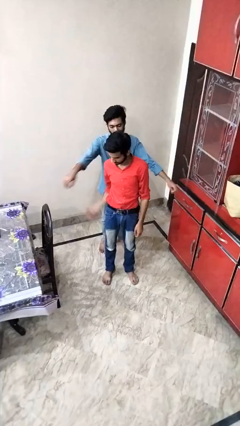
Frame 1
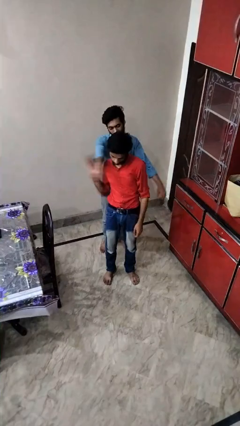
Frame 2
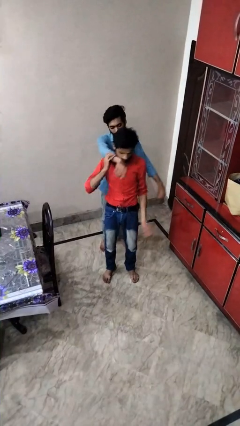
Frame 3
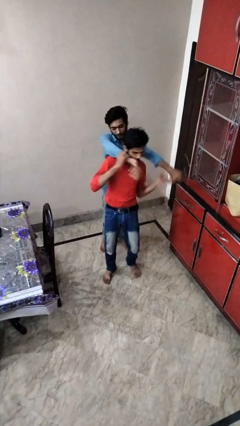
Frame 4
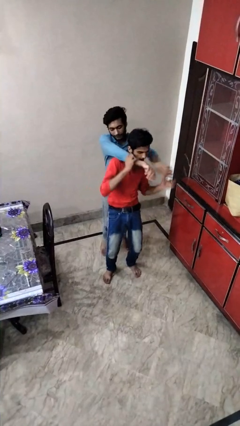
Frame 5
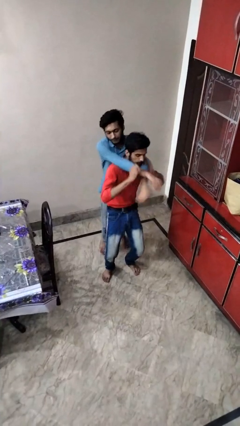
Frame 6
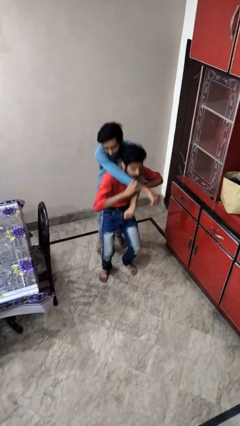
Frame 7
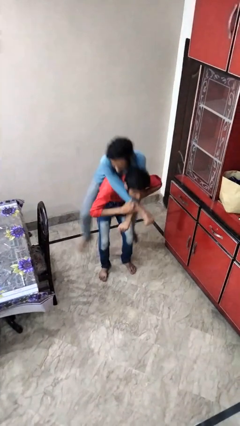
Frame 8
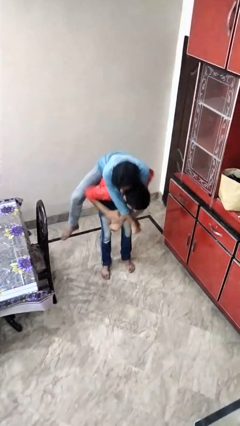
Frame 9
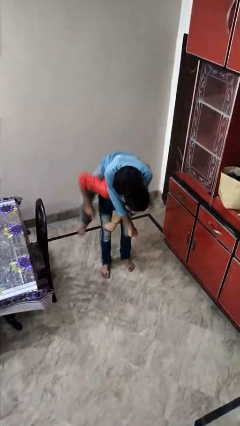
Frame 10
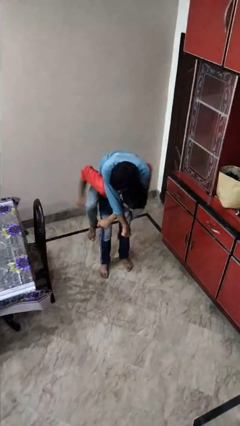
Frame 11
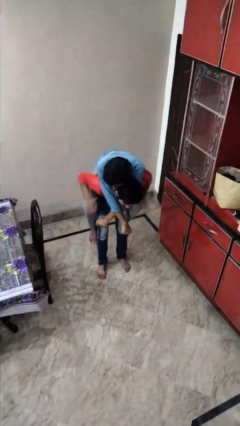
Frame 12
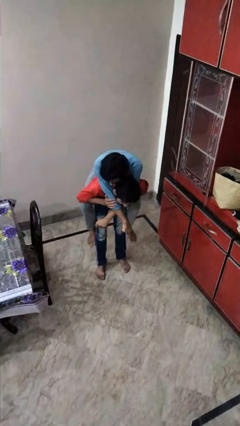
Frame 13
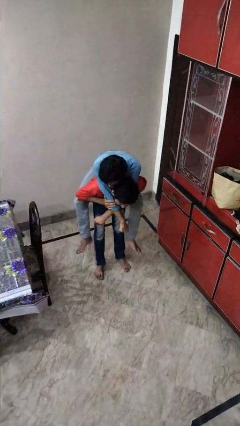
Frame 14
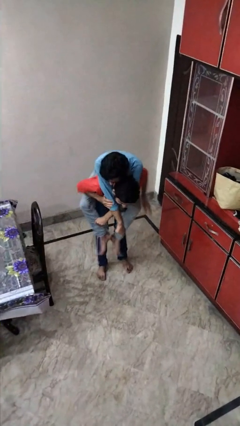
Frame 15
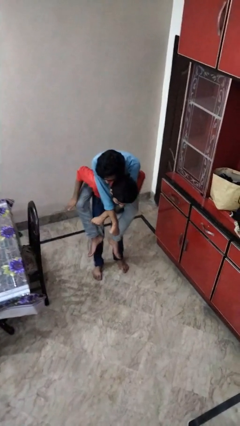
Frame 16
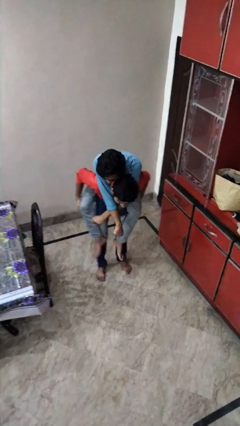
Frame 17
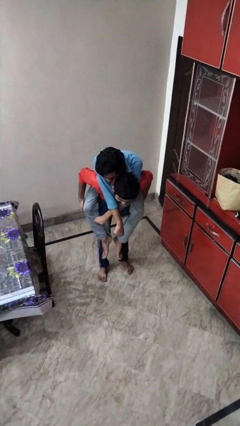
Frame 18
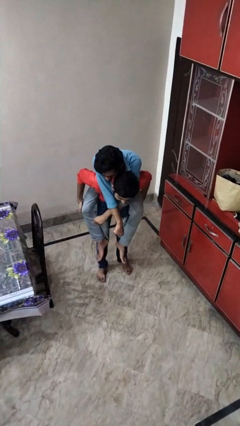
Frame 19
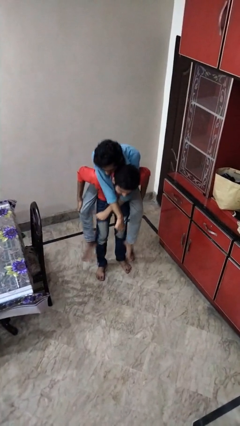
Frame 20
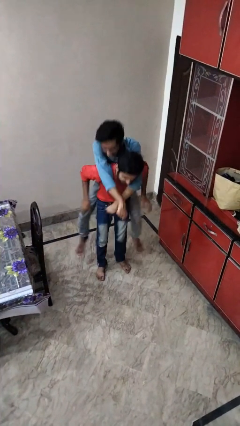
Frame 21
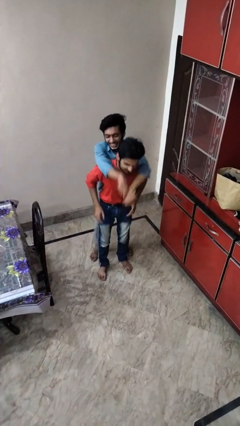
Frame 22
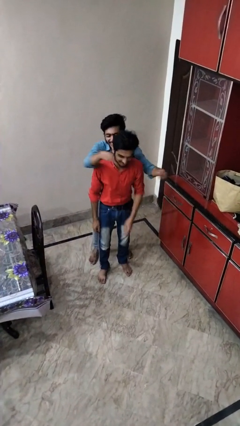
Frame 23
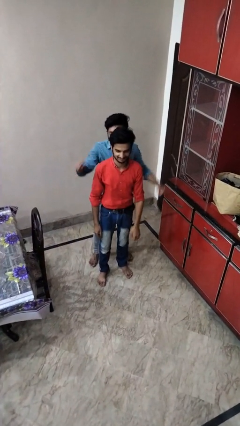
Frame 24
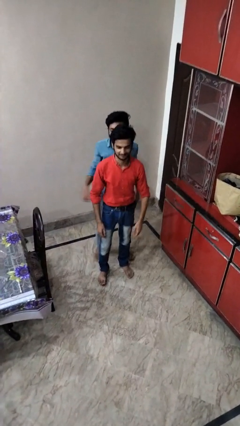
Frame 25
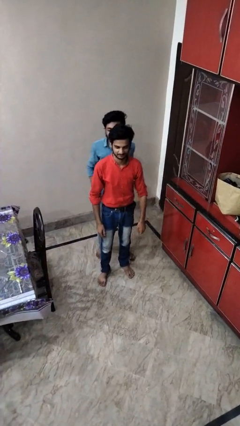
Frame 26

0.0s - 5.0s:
person carries person over shoulder

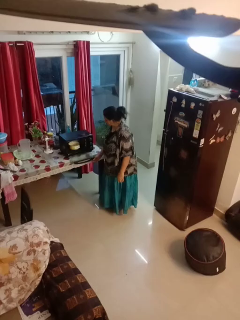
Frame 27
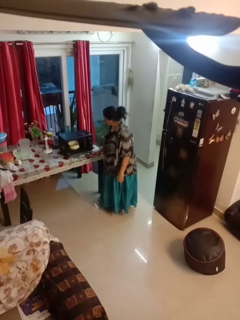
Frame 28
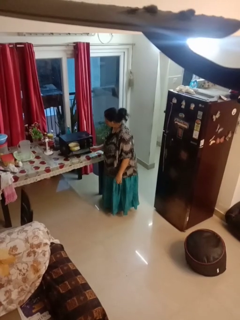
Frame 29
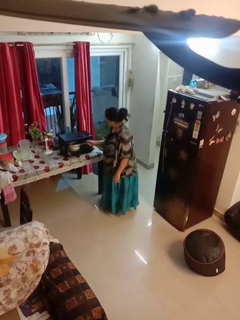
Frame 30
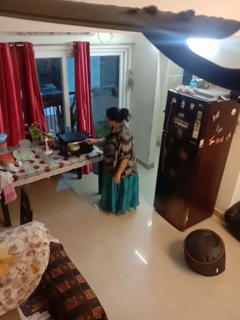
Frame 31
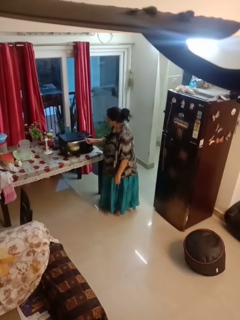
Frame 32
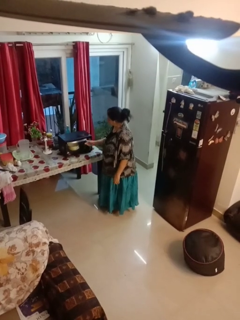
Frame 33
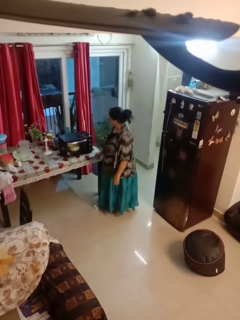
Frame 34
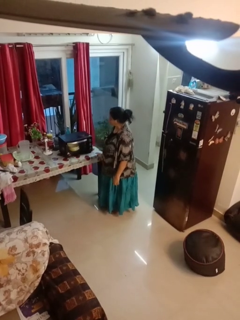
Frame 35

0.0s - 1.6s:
person closes microwave

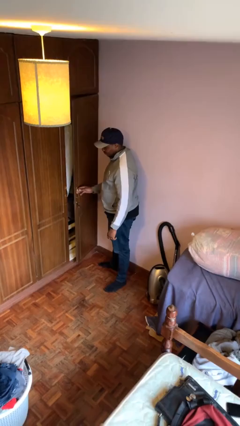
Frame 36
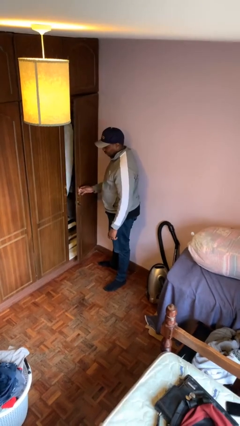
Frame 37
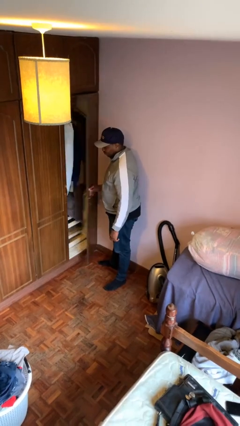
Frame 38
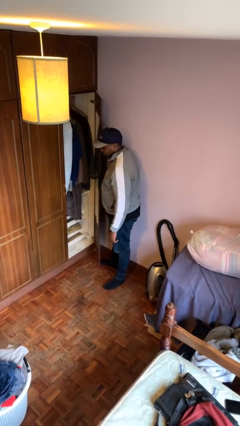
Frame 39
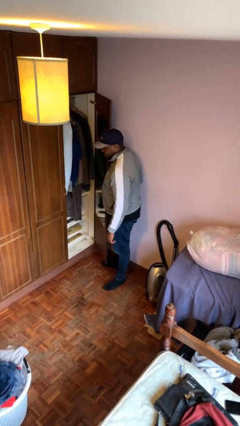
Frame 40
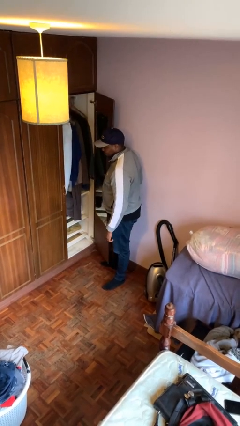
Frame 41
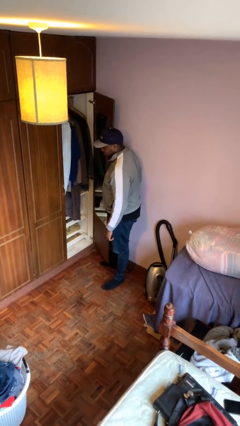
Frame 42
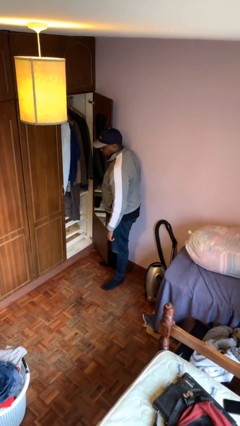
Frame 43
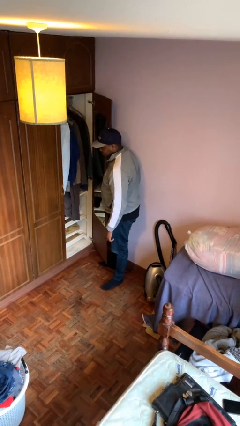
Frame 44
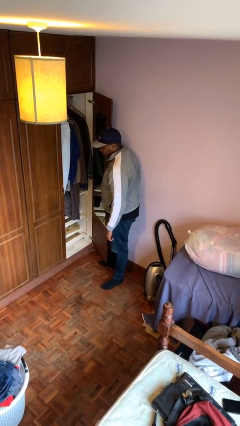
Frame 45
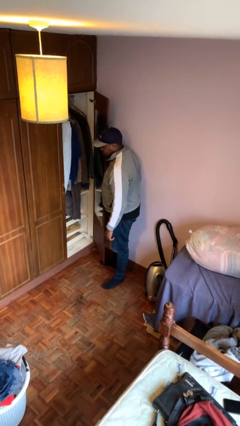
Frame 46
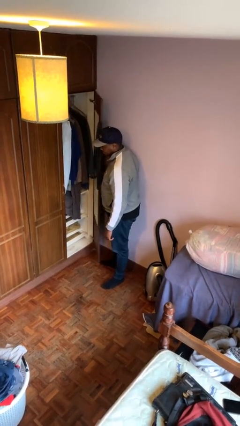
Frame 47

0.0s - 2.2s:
person opens closet door

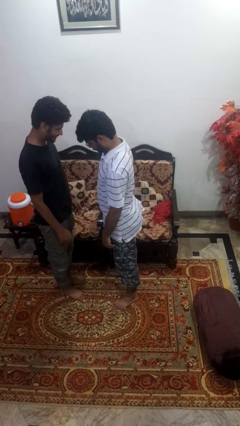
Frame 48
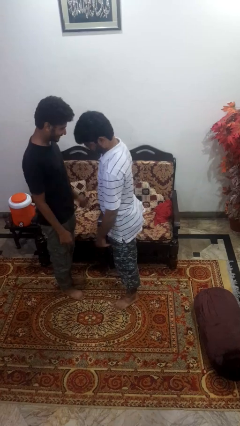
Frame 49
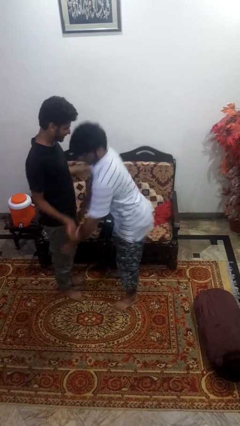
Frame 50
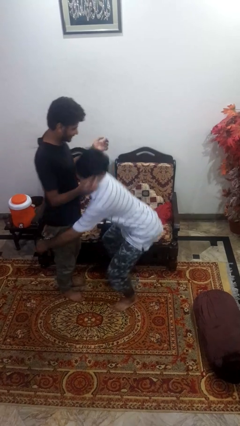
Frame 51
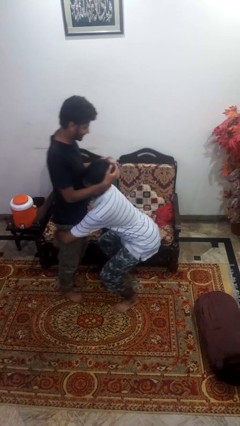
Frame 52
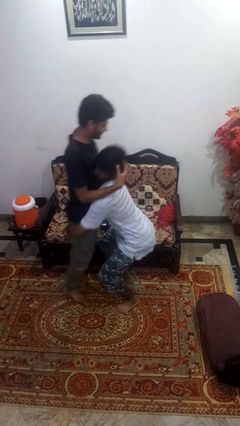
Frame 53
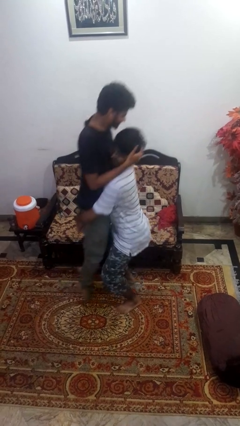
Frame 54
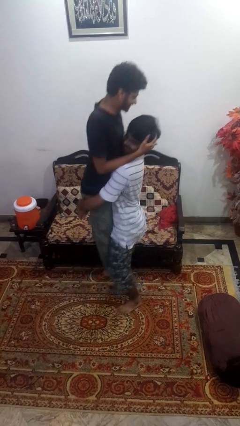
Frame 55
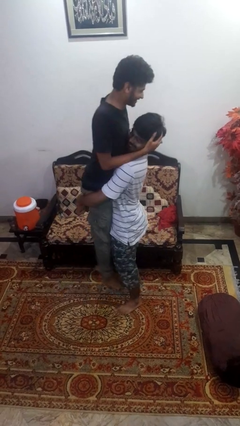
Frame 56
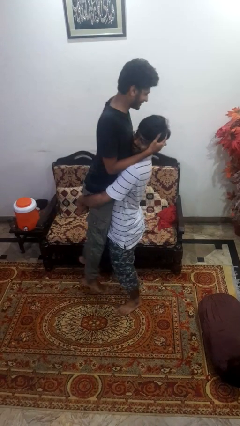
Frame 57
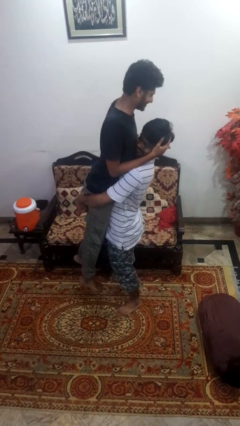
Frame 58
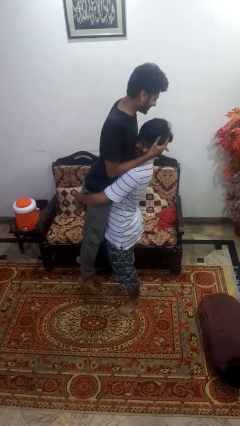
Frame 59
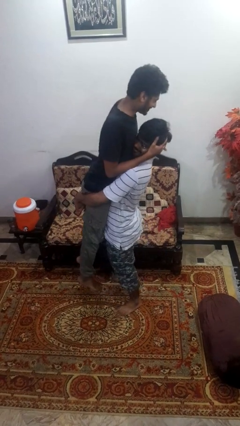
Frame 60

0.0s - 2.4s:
person picks up person

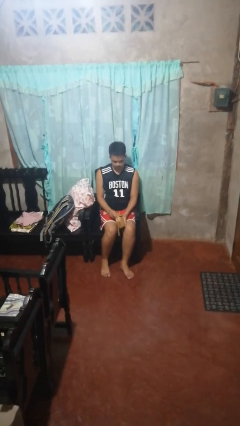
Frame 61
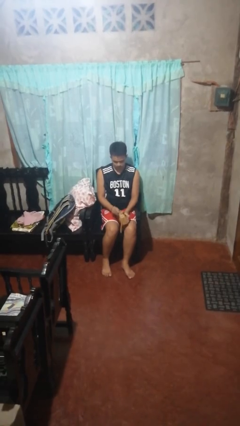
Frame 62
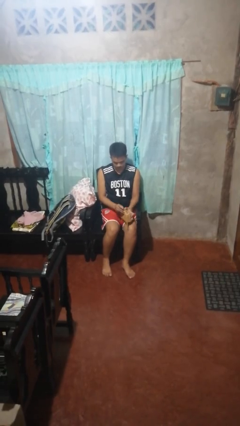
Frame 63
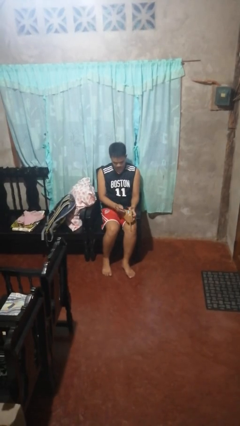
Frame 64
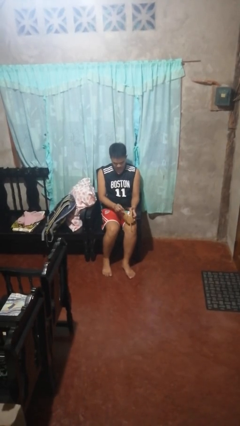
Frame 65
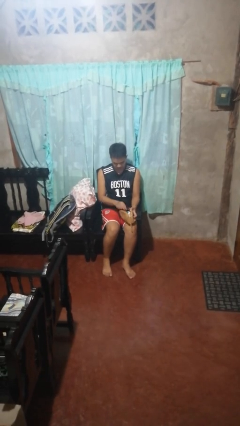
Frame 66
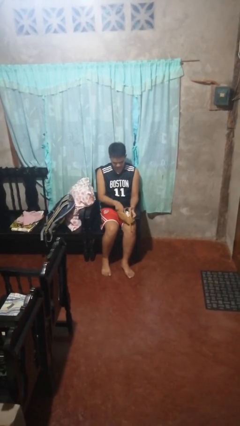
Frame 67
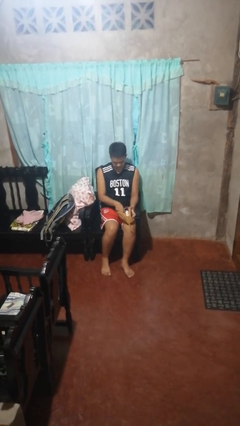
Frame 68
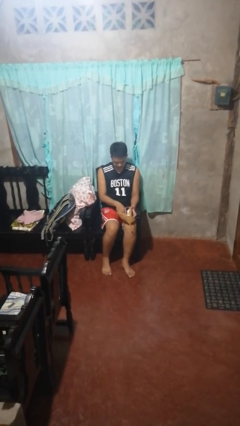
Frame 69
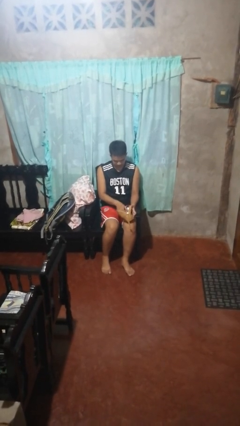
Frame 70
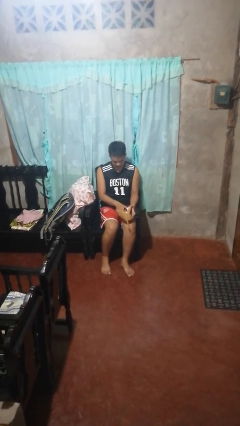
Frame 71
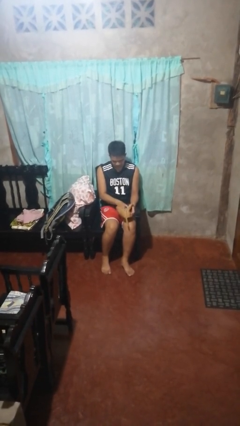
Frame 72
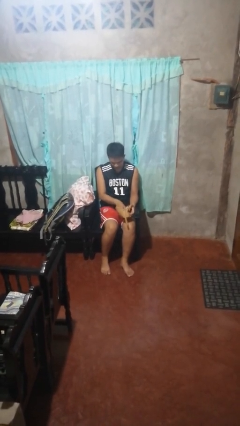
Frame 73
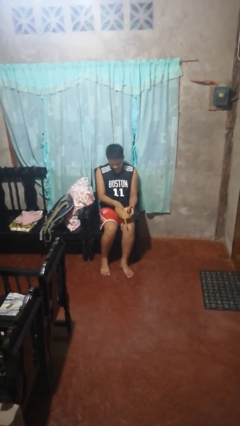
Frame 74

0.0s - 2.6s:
person searches in purse

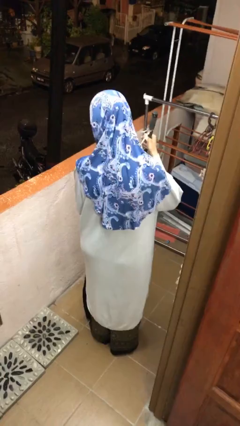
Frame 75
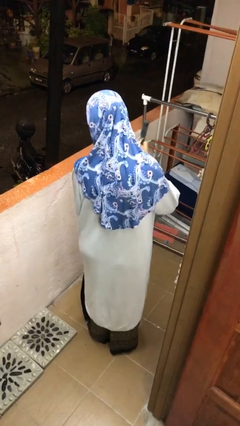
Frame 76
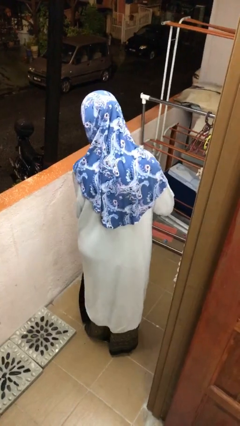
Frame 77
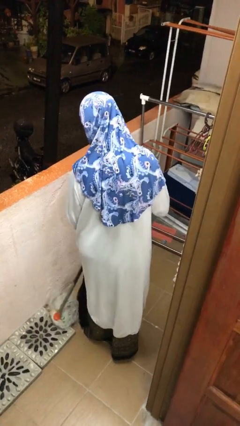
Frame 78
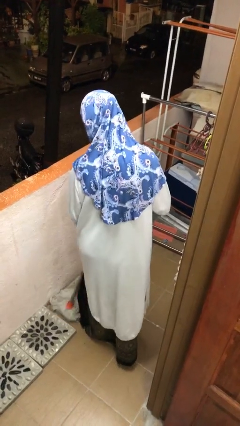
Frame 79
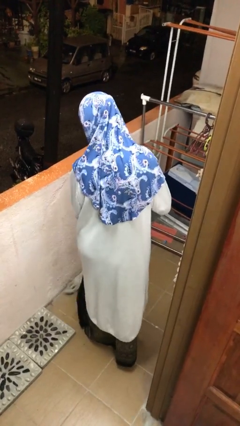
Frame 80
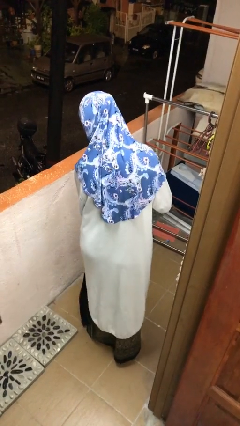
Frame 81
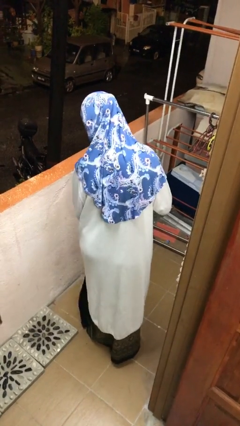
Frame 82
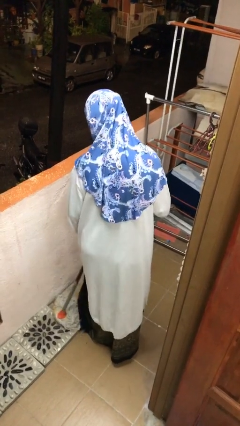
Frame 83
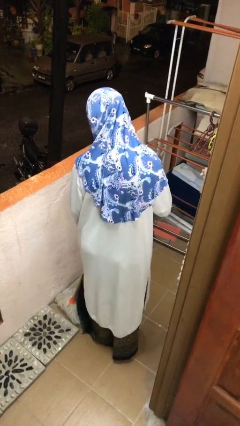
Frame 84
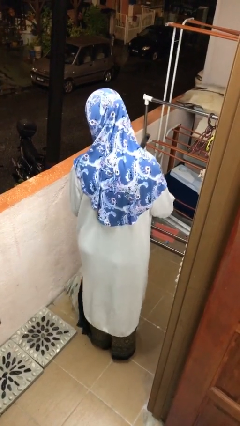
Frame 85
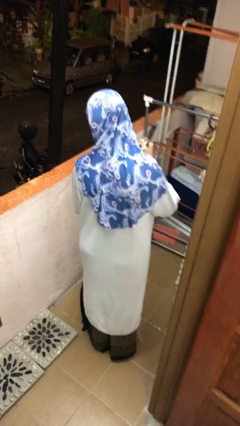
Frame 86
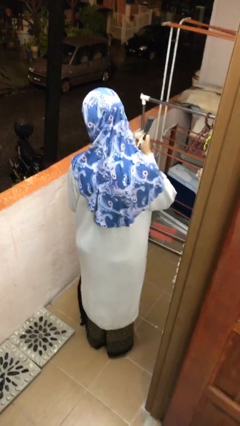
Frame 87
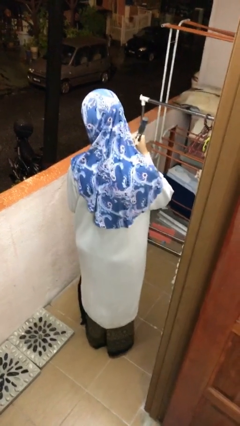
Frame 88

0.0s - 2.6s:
person mops

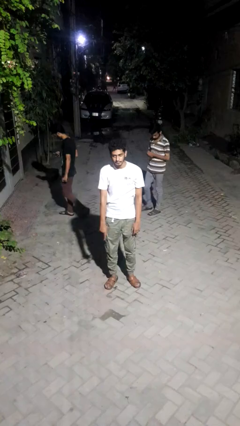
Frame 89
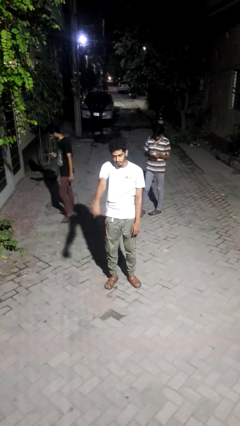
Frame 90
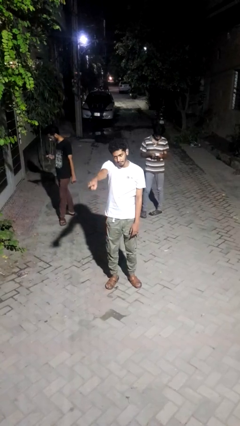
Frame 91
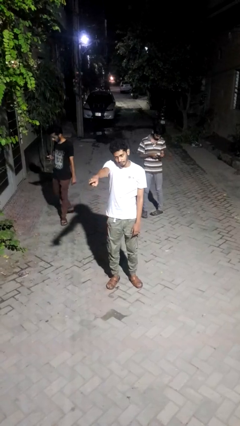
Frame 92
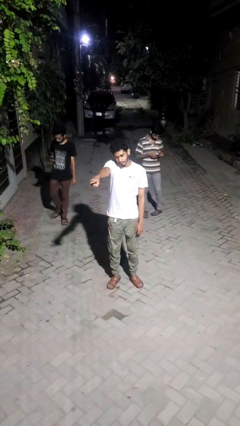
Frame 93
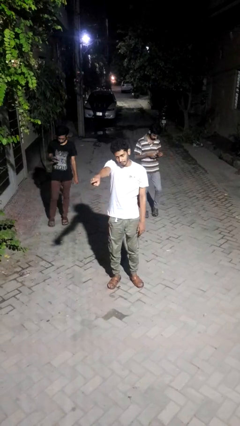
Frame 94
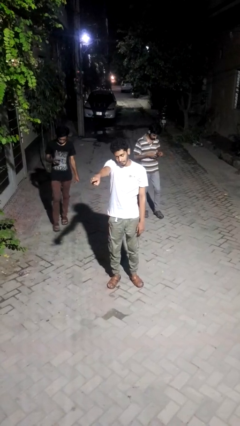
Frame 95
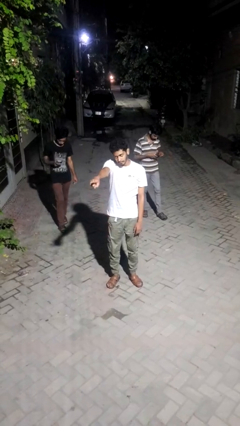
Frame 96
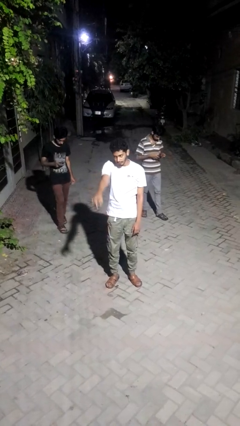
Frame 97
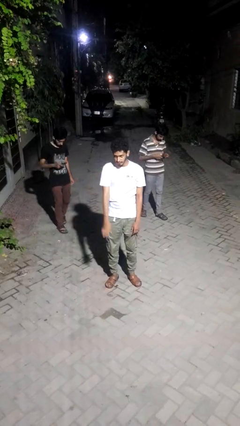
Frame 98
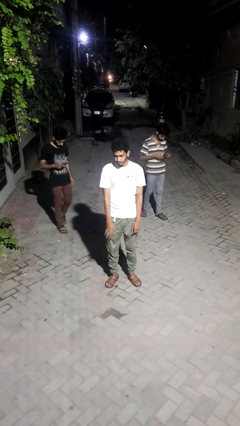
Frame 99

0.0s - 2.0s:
person points at person
